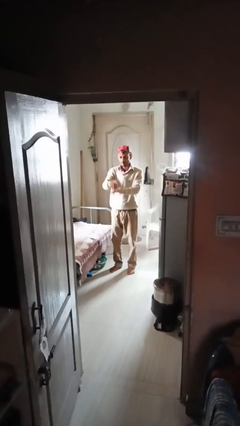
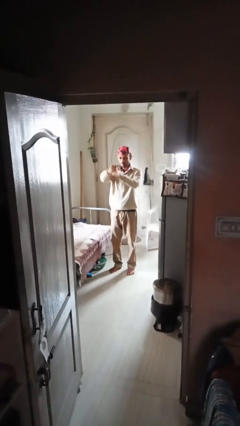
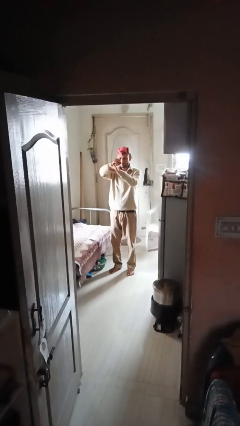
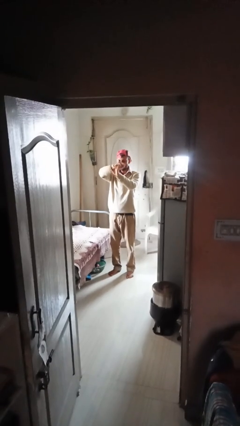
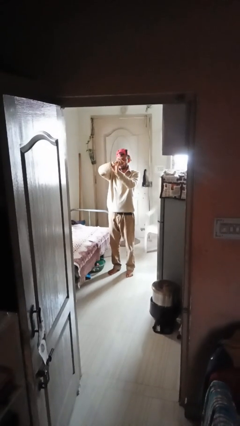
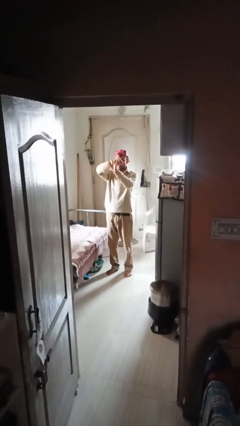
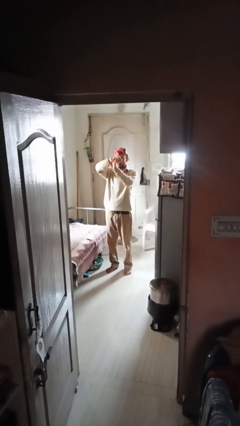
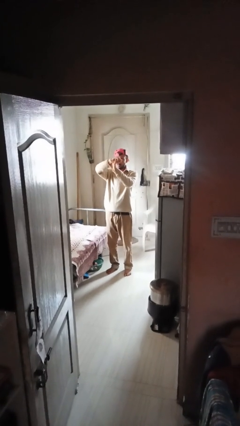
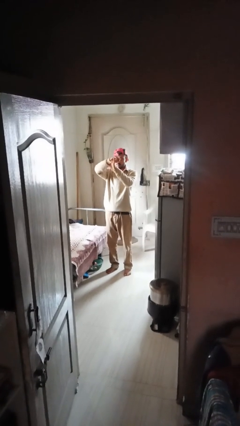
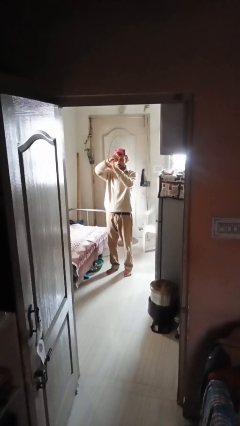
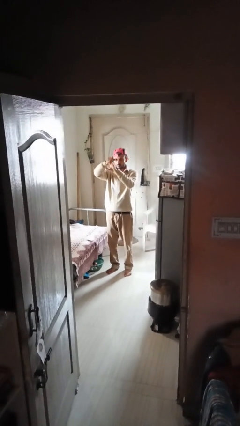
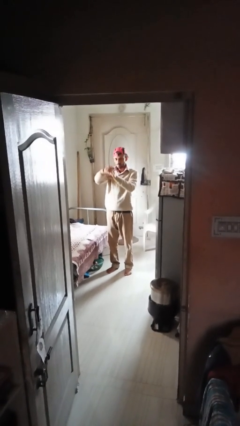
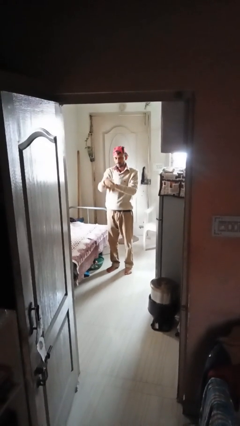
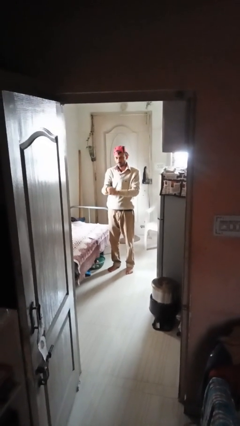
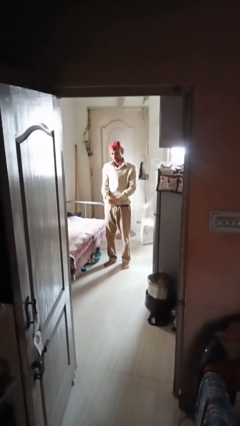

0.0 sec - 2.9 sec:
person cracks knuckles

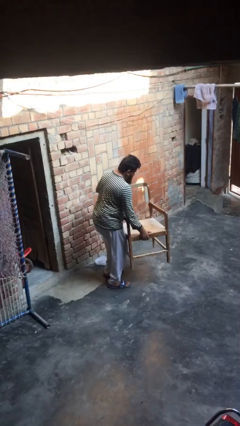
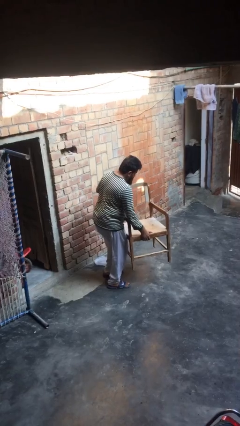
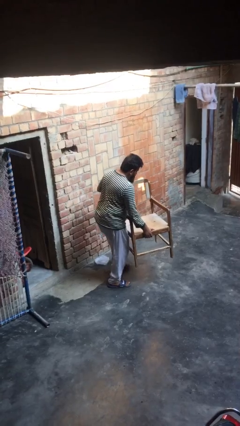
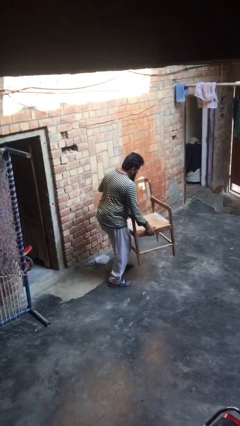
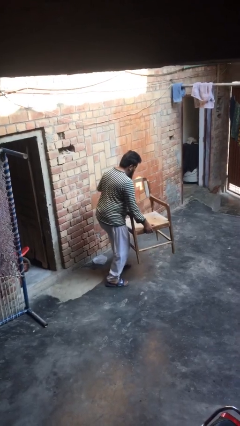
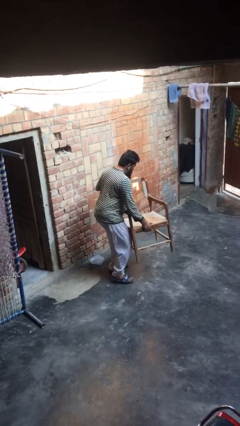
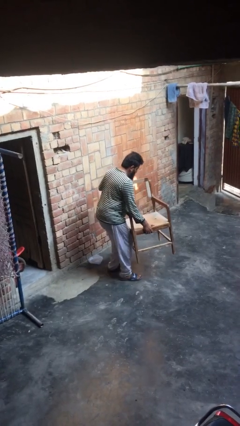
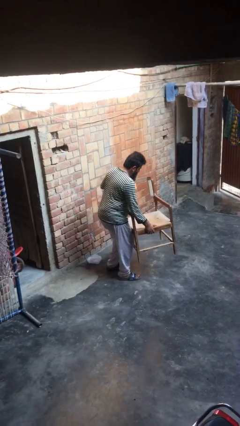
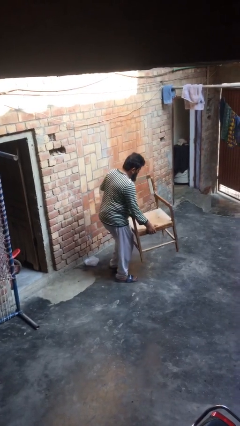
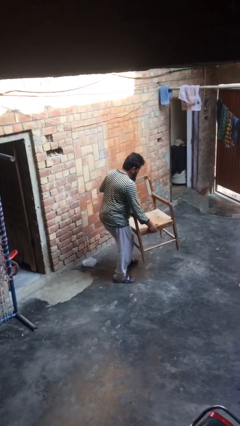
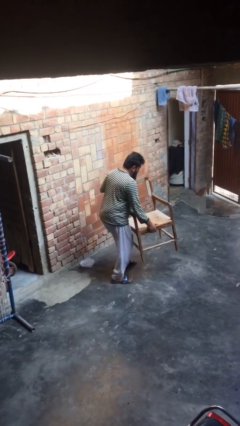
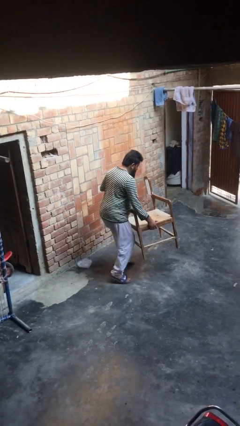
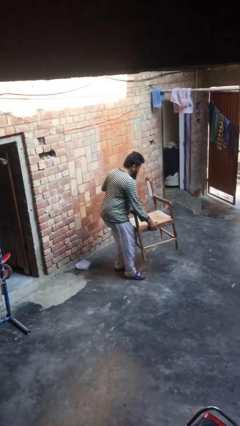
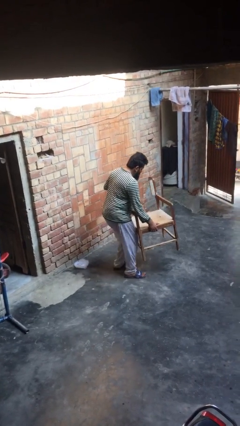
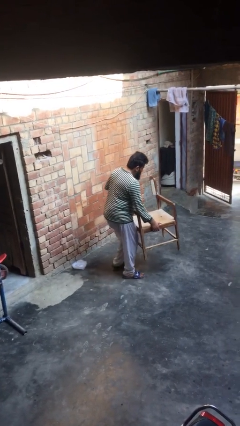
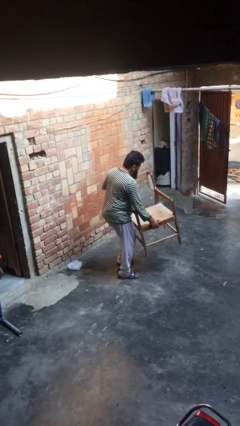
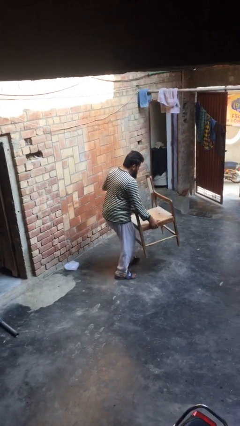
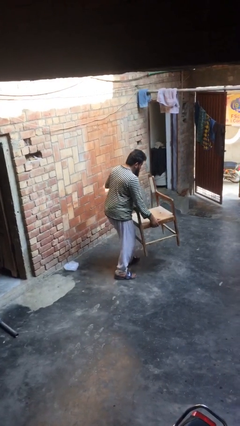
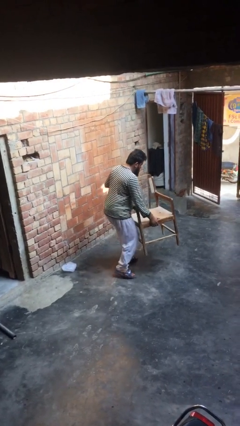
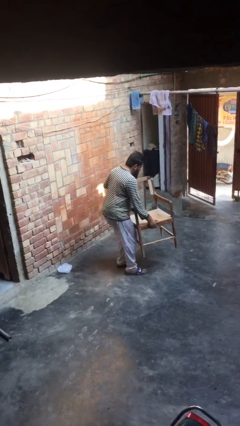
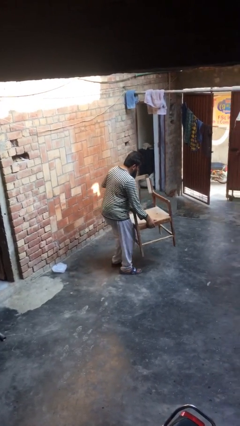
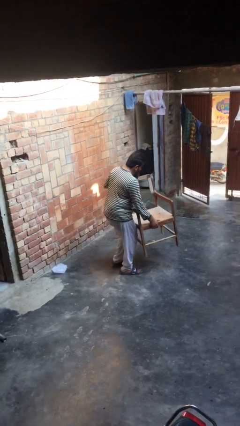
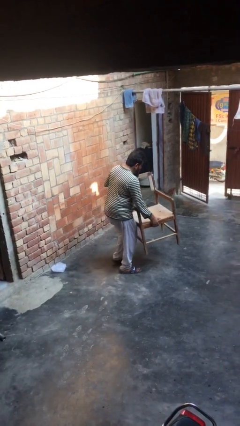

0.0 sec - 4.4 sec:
person carries heavy object

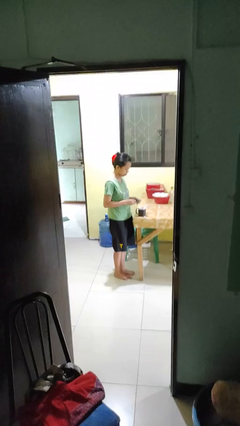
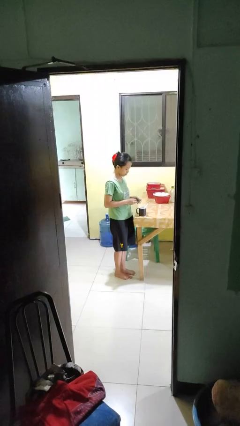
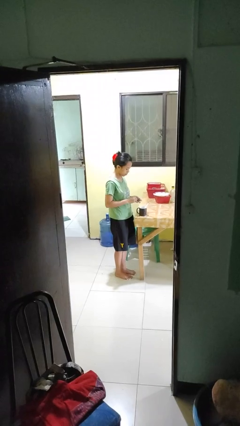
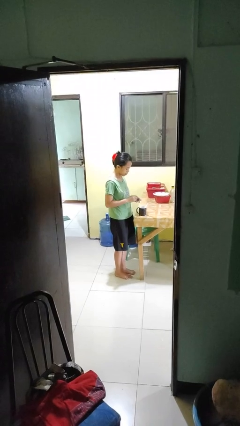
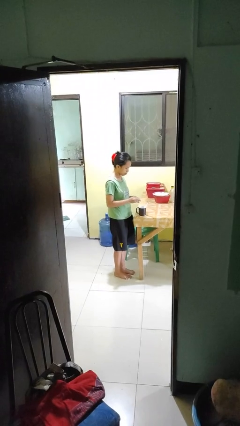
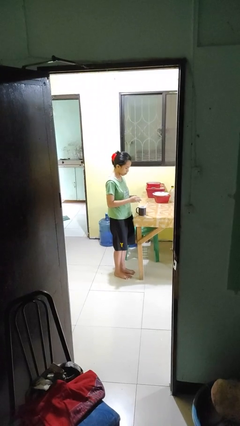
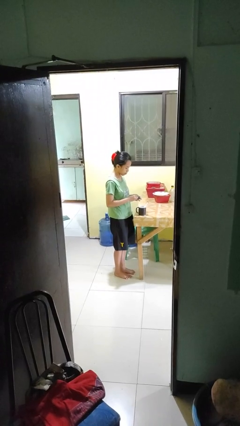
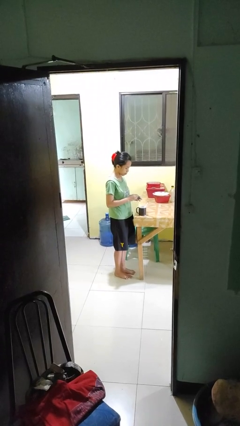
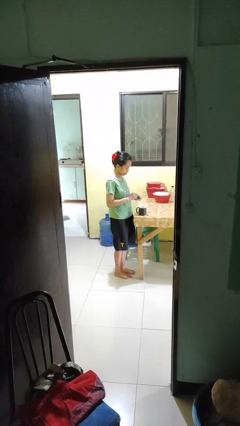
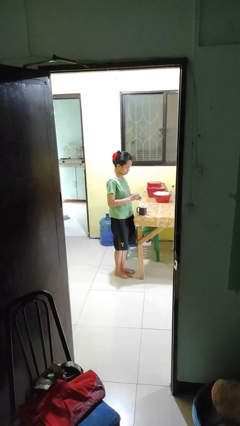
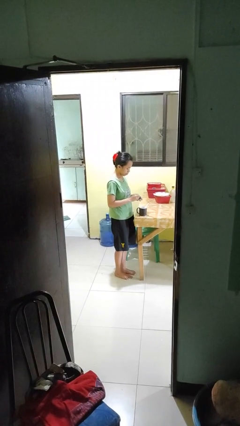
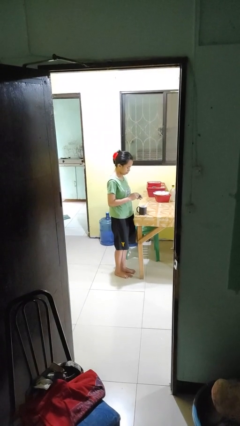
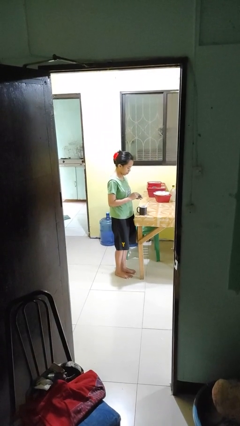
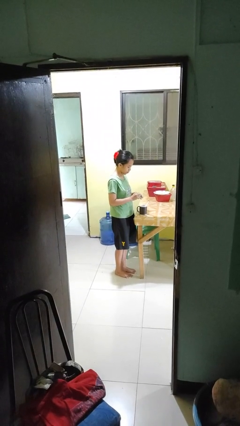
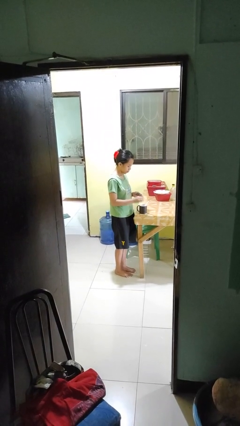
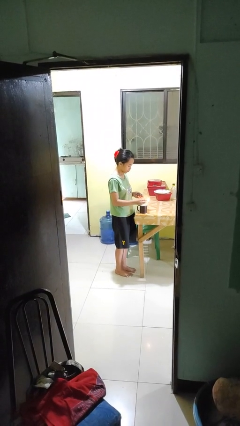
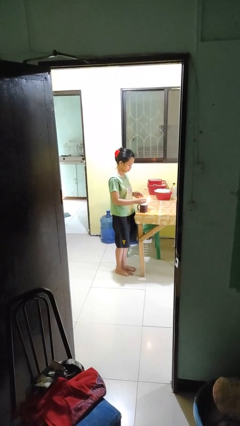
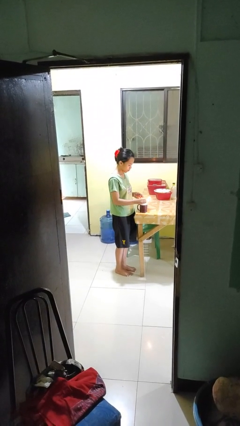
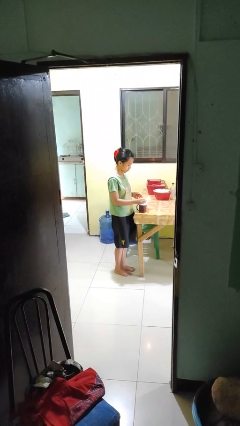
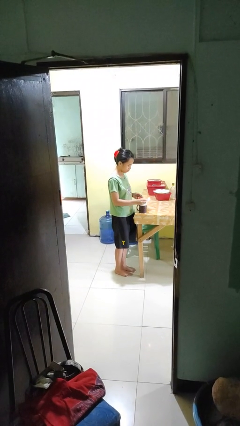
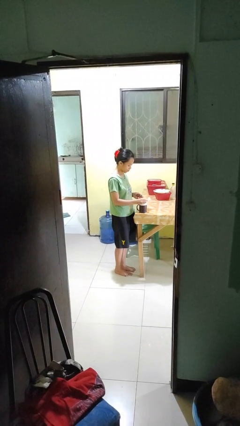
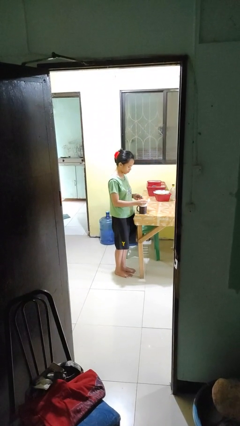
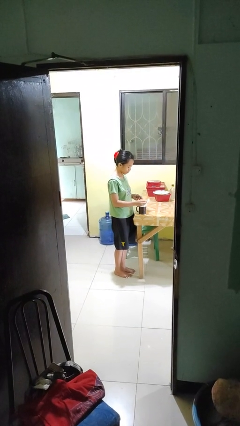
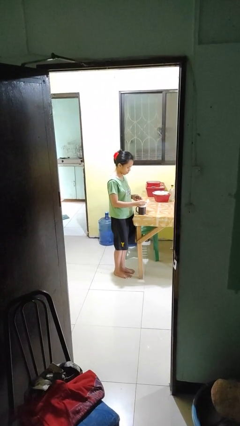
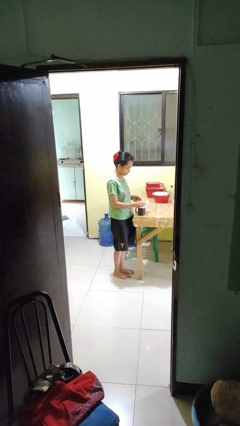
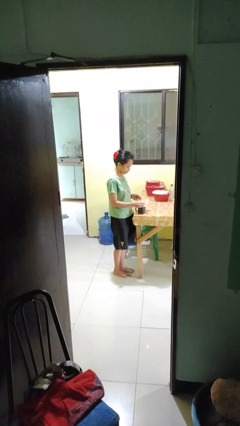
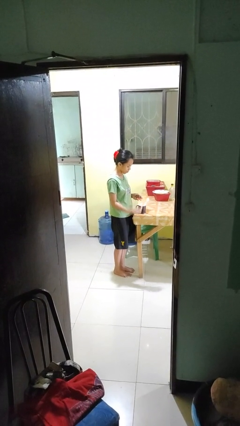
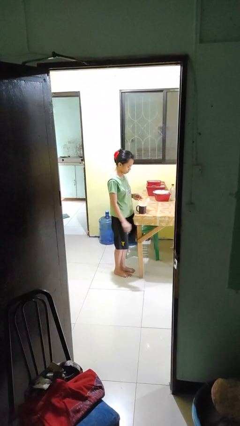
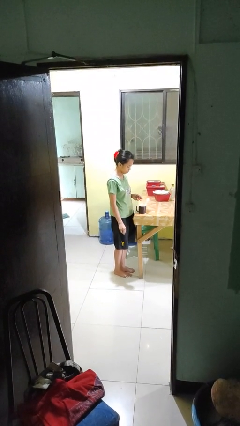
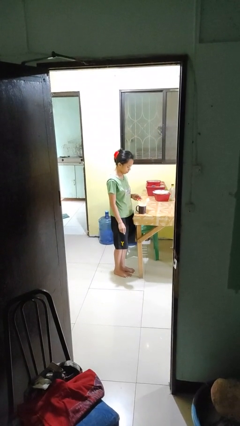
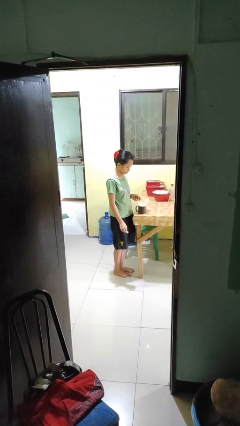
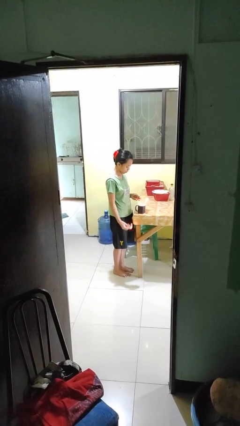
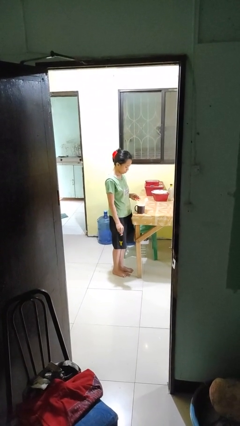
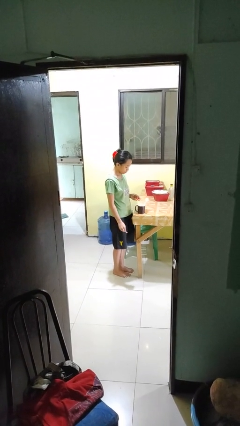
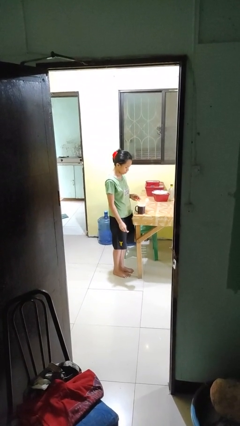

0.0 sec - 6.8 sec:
person lights candle

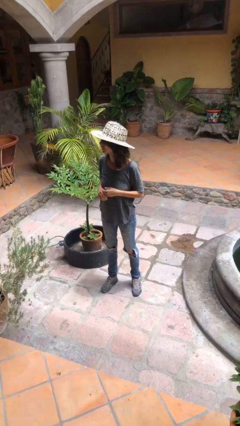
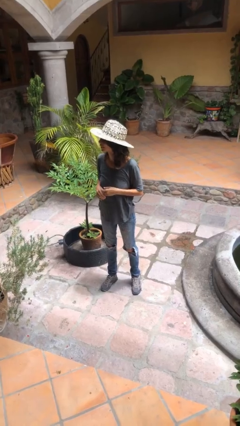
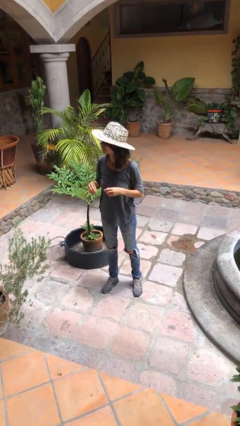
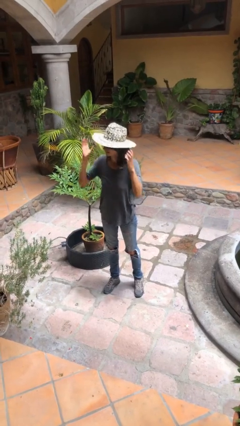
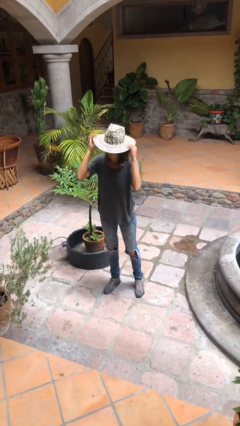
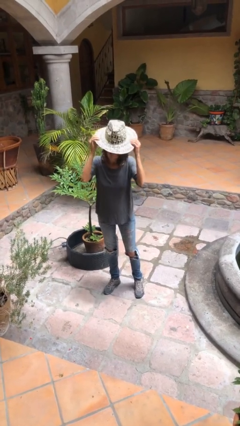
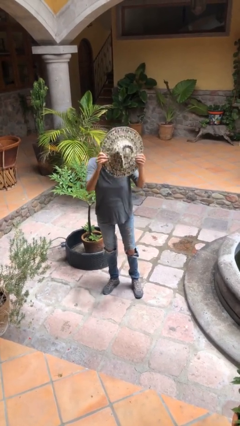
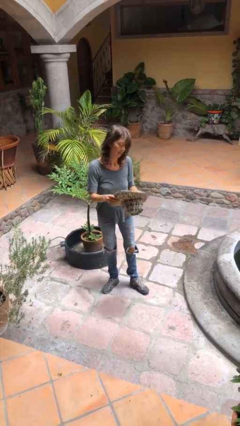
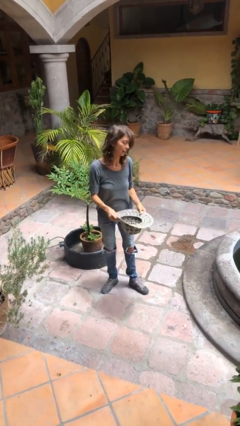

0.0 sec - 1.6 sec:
person takes off hat

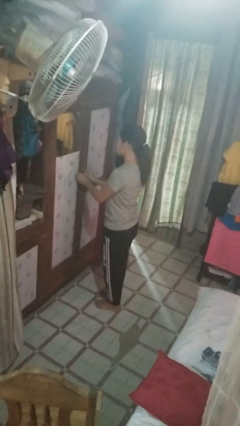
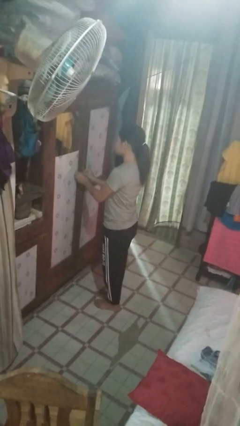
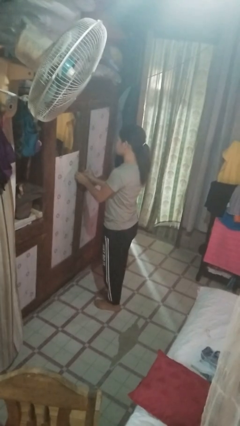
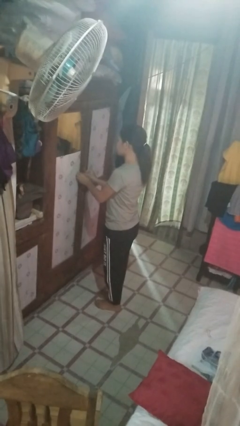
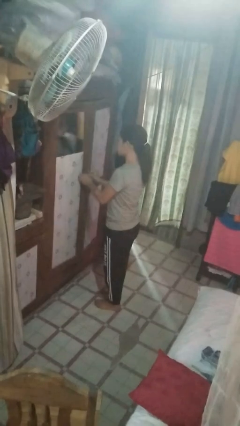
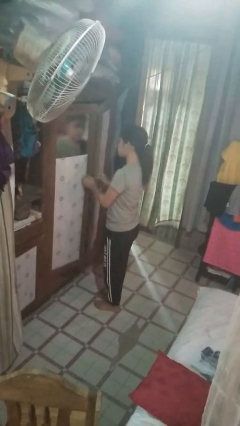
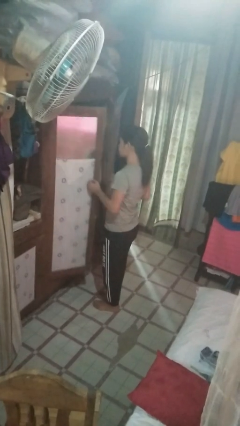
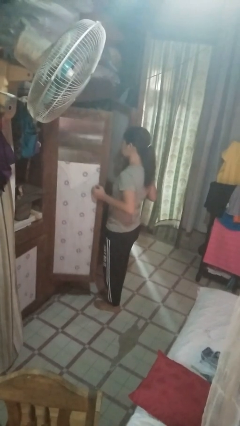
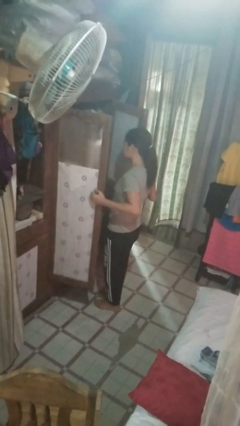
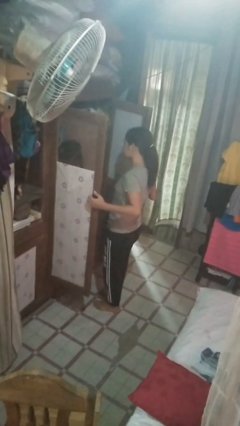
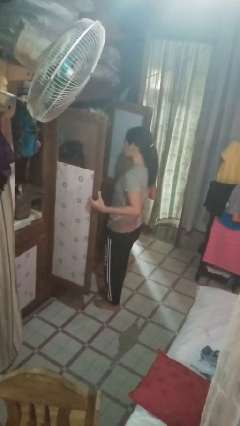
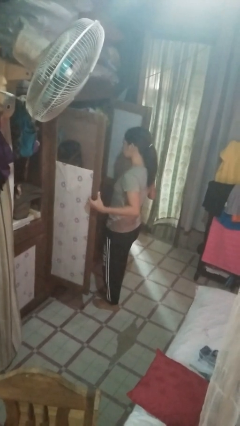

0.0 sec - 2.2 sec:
person opens closet door
